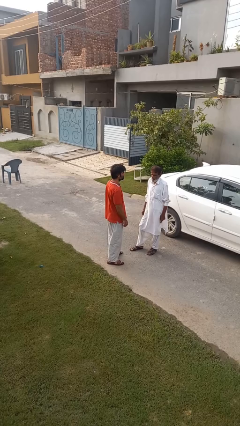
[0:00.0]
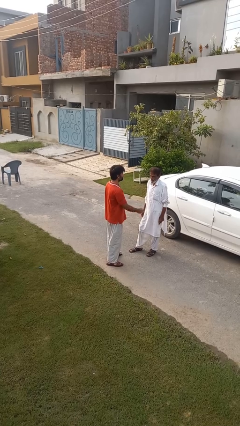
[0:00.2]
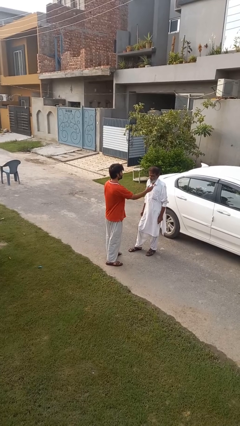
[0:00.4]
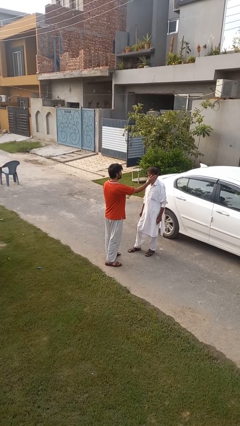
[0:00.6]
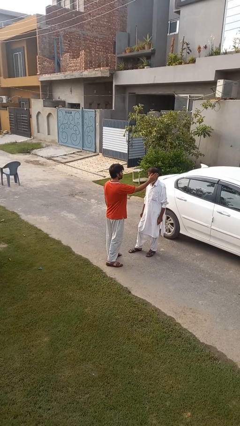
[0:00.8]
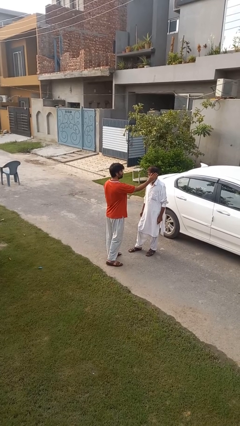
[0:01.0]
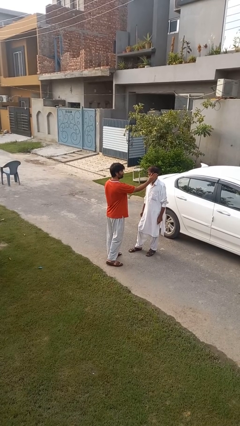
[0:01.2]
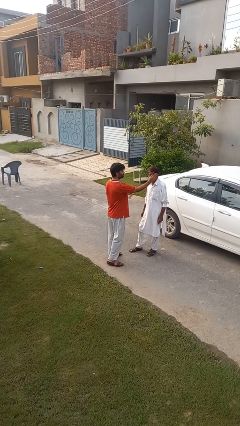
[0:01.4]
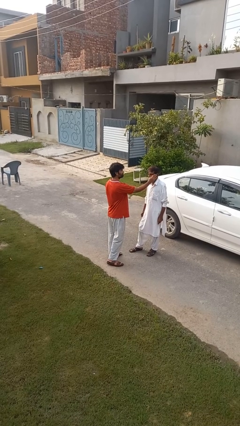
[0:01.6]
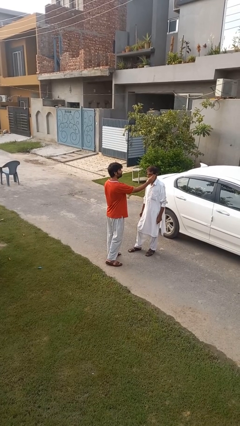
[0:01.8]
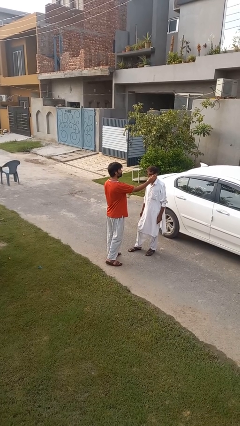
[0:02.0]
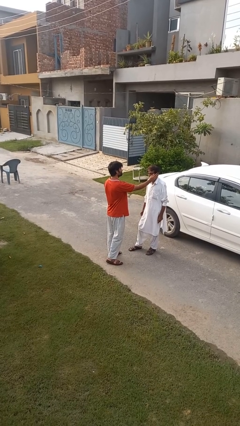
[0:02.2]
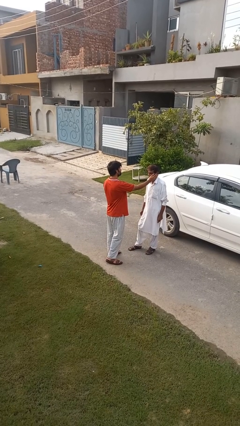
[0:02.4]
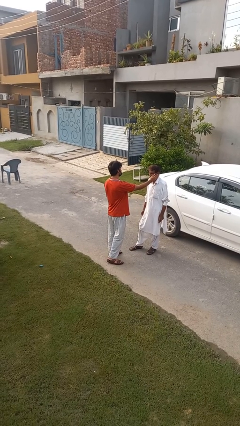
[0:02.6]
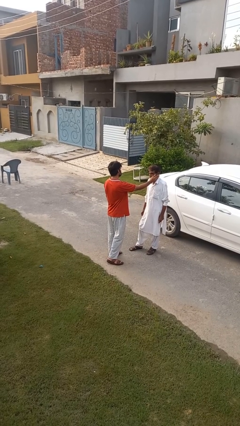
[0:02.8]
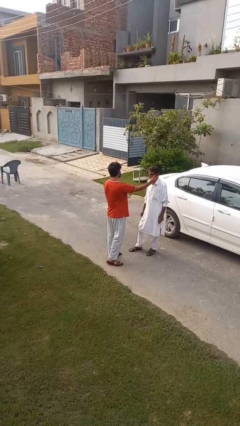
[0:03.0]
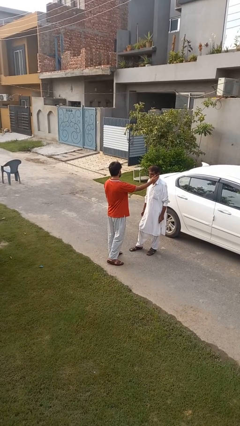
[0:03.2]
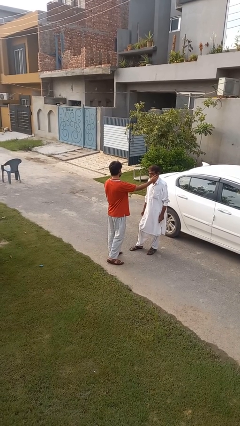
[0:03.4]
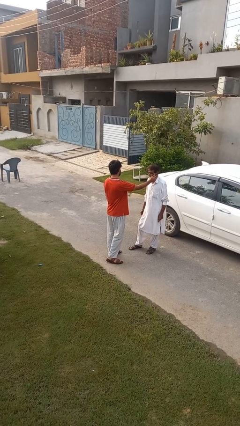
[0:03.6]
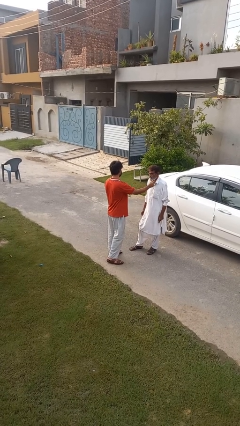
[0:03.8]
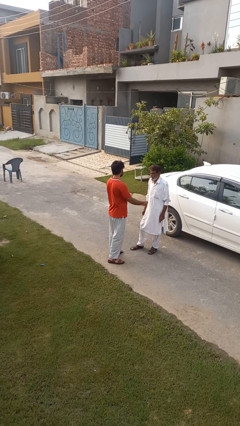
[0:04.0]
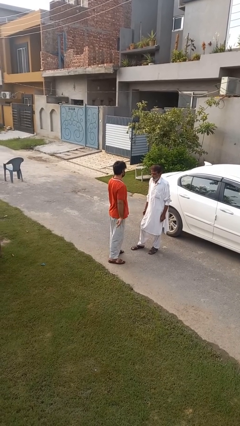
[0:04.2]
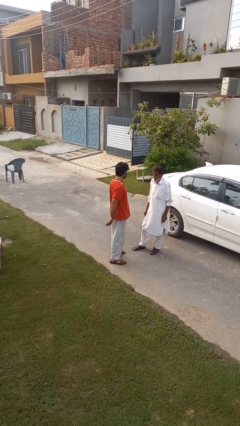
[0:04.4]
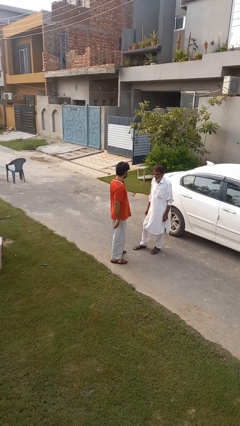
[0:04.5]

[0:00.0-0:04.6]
person touches face of person

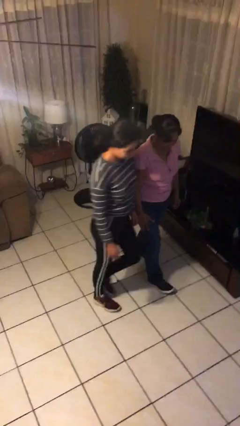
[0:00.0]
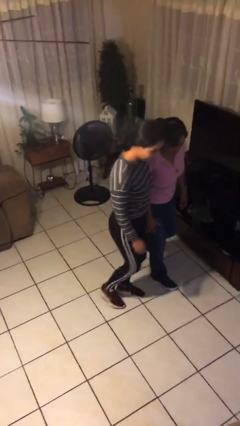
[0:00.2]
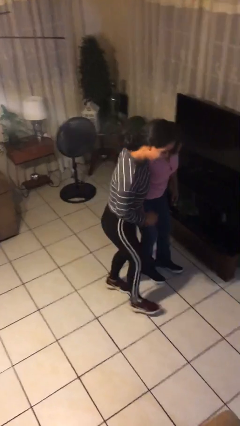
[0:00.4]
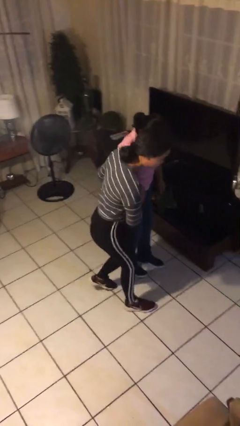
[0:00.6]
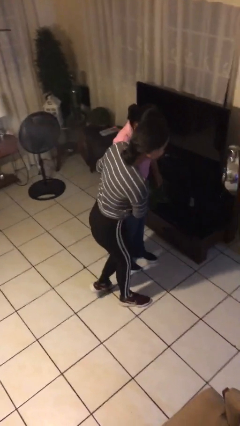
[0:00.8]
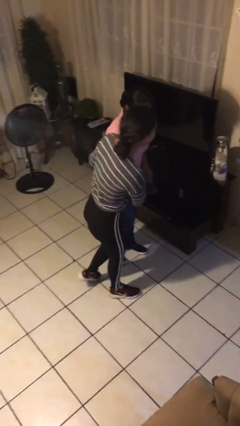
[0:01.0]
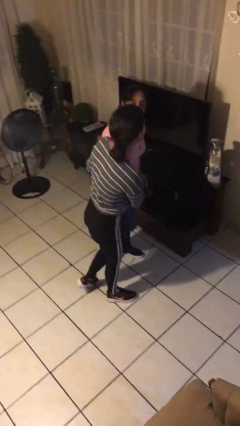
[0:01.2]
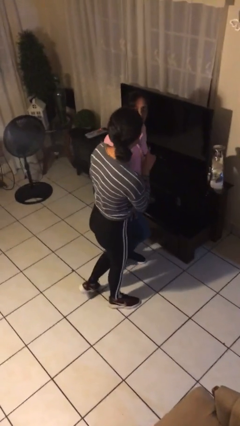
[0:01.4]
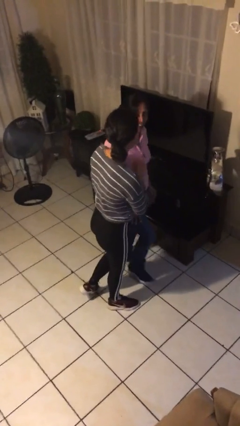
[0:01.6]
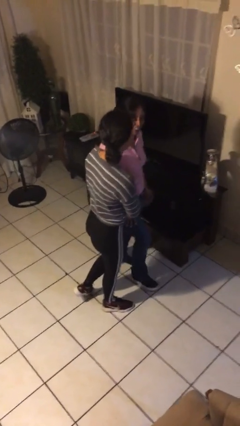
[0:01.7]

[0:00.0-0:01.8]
person bumps into person

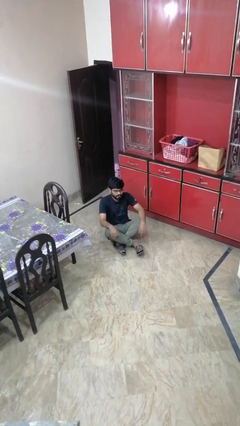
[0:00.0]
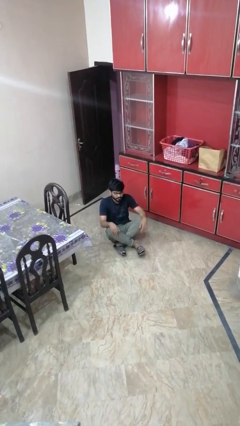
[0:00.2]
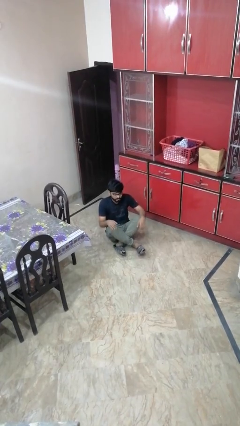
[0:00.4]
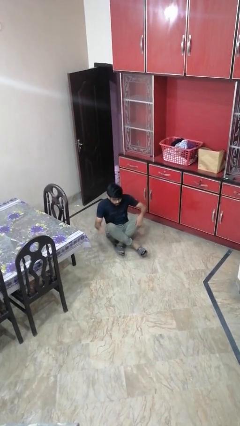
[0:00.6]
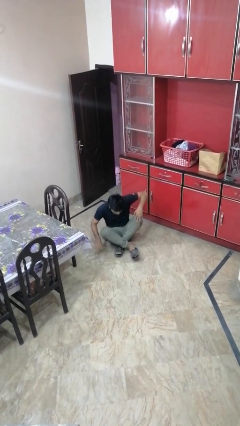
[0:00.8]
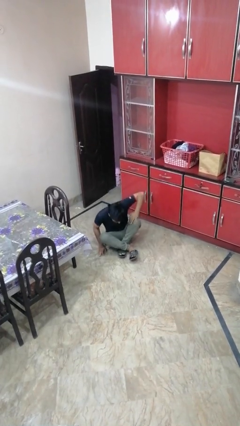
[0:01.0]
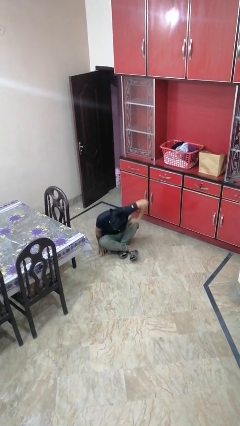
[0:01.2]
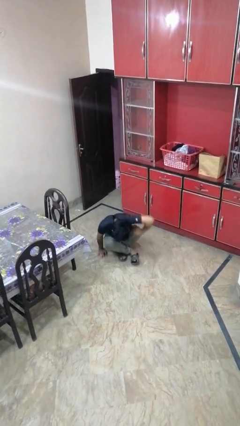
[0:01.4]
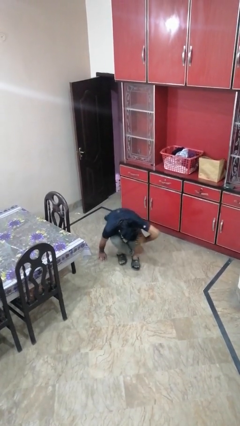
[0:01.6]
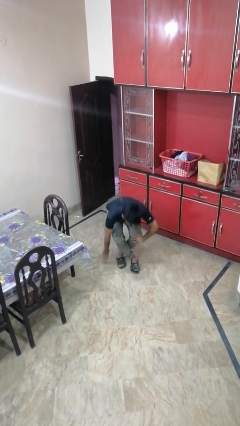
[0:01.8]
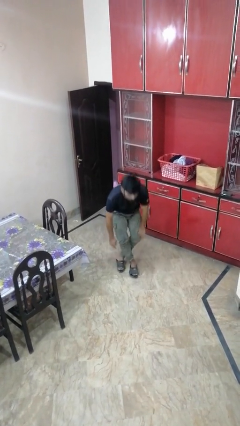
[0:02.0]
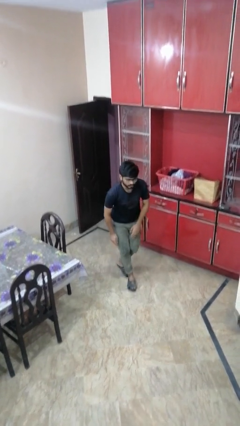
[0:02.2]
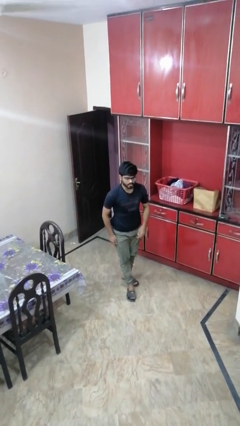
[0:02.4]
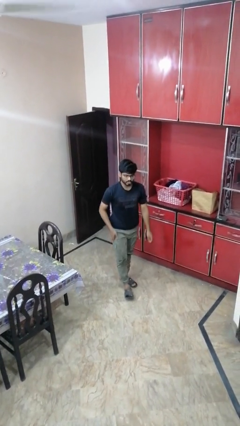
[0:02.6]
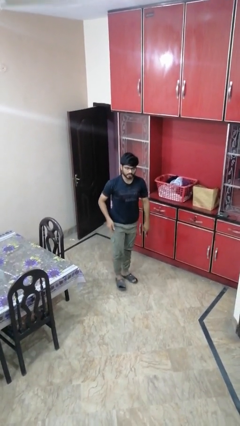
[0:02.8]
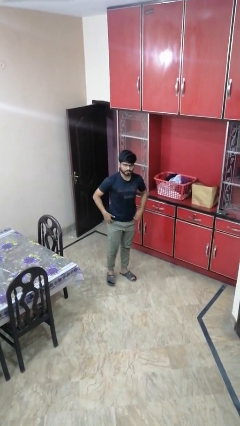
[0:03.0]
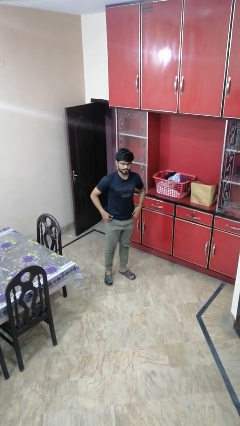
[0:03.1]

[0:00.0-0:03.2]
person stands up from floor

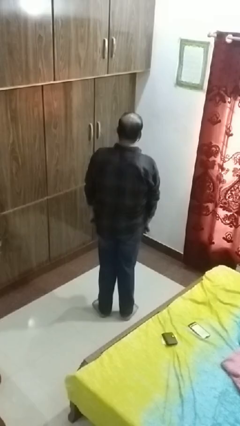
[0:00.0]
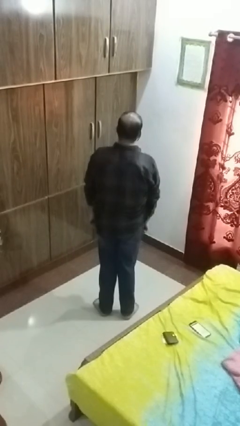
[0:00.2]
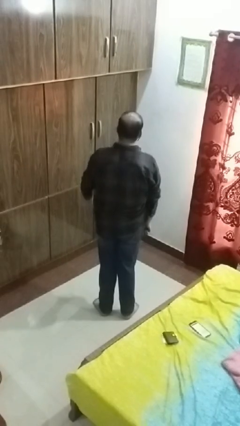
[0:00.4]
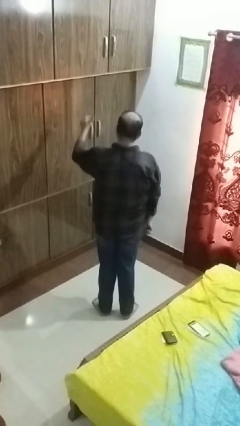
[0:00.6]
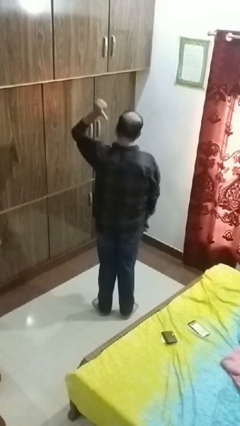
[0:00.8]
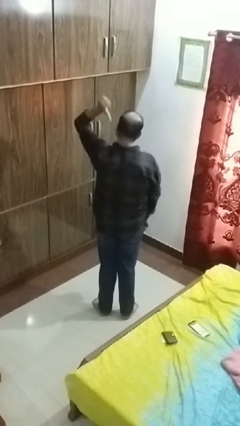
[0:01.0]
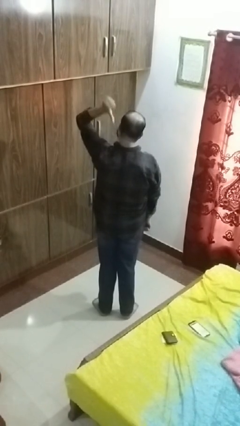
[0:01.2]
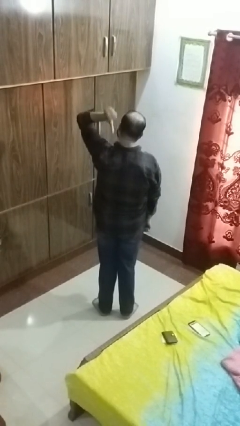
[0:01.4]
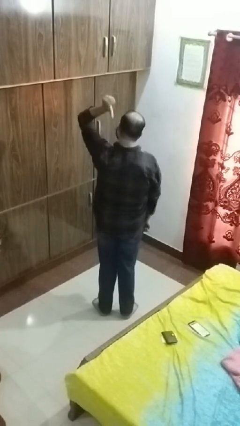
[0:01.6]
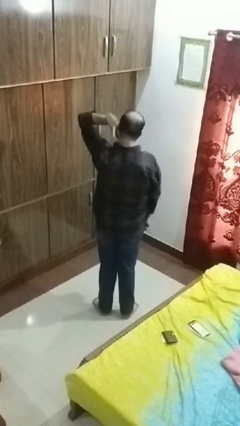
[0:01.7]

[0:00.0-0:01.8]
person gestures behind me

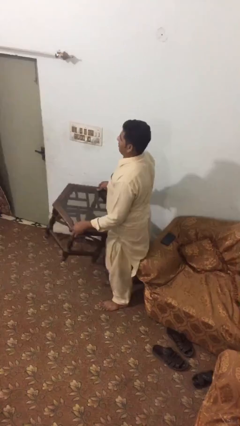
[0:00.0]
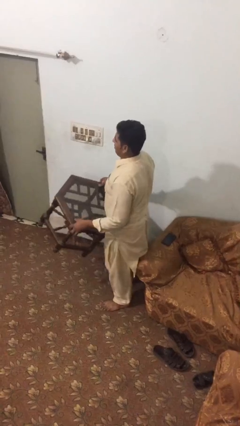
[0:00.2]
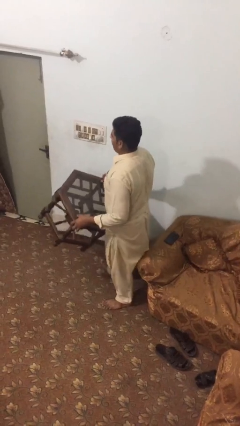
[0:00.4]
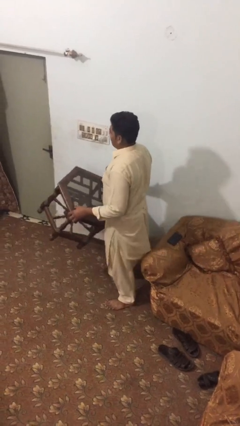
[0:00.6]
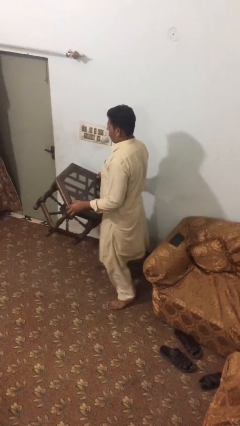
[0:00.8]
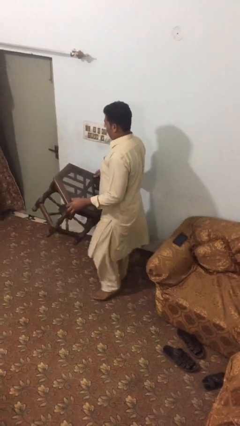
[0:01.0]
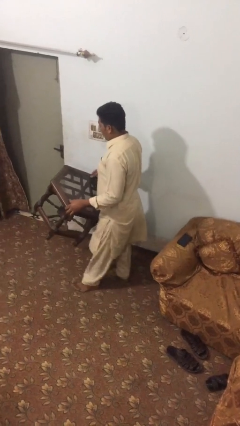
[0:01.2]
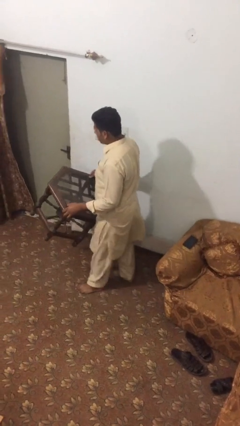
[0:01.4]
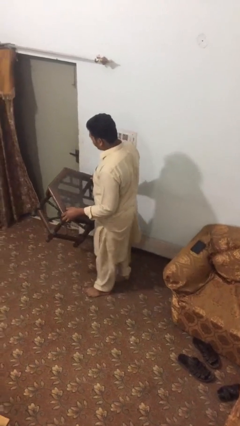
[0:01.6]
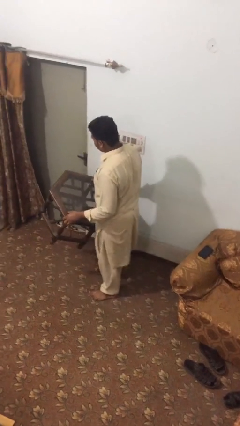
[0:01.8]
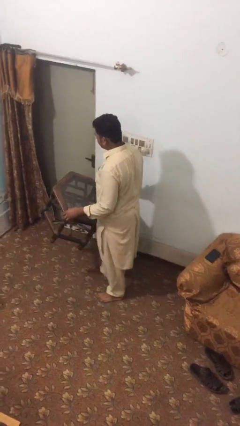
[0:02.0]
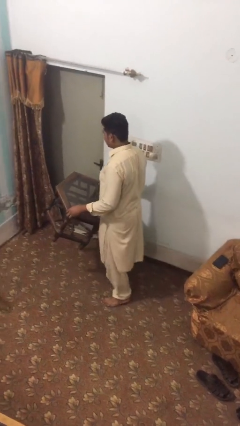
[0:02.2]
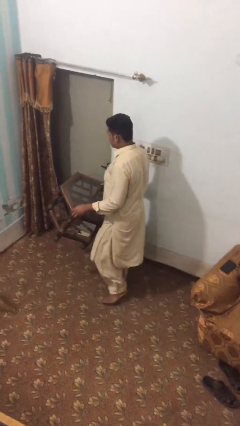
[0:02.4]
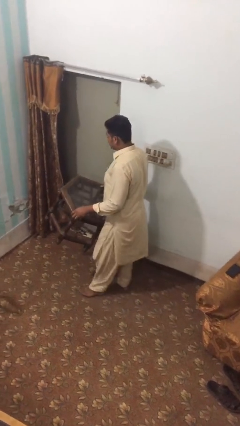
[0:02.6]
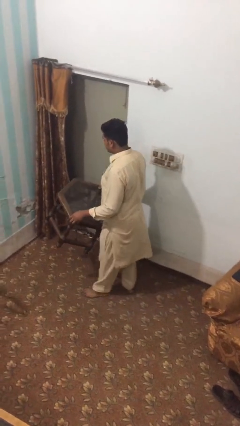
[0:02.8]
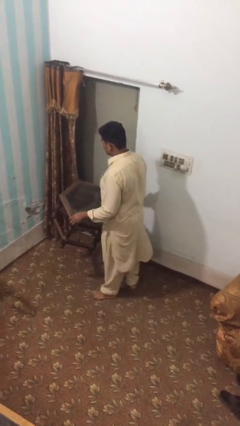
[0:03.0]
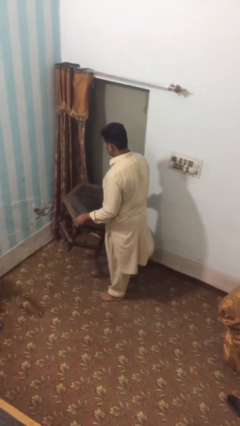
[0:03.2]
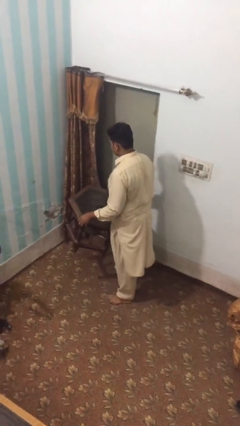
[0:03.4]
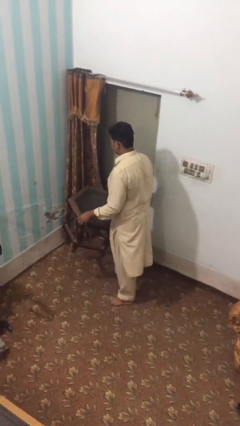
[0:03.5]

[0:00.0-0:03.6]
person carries heavy object

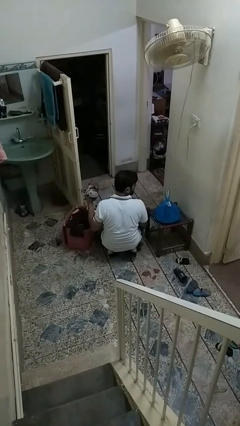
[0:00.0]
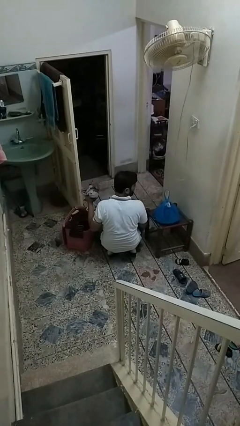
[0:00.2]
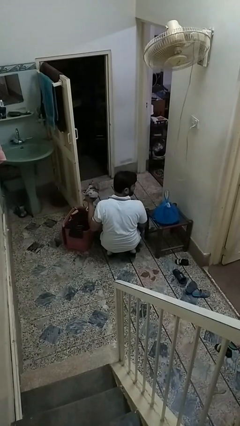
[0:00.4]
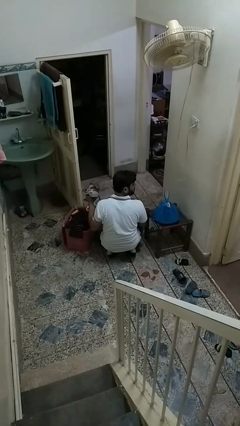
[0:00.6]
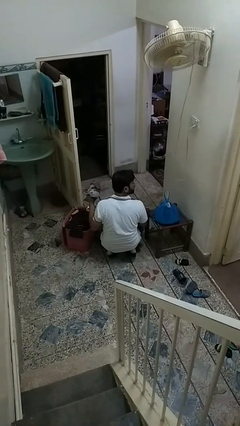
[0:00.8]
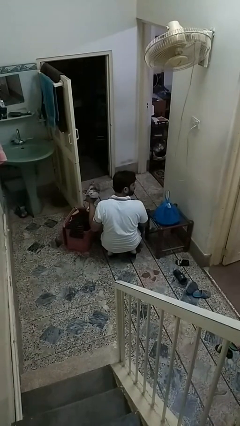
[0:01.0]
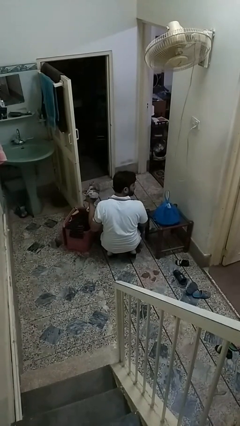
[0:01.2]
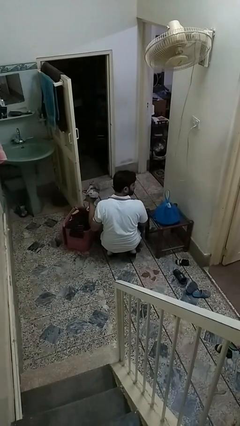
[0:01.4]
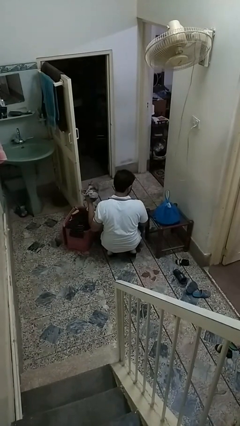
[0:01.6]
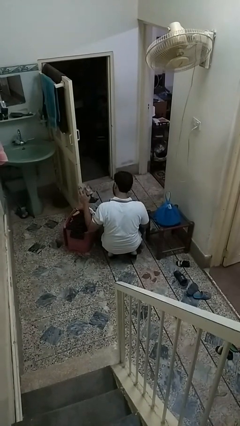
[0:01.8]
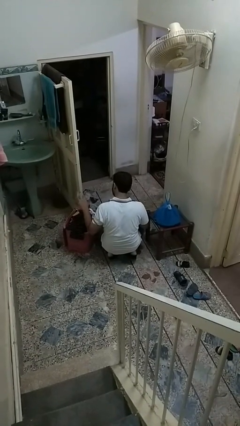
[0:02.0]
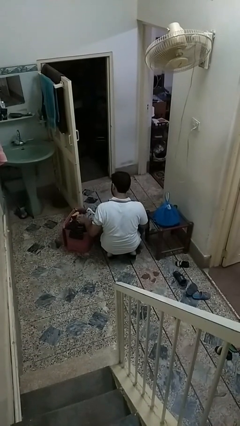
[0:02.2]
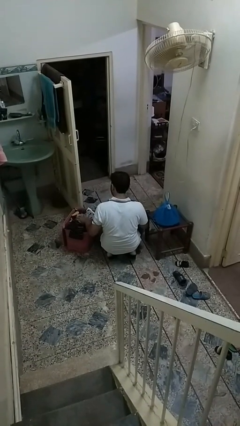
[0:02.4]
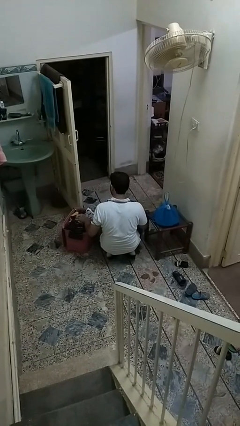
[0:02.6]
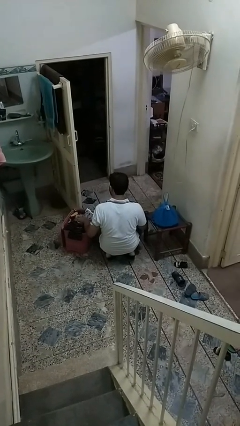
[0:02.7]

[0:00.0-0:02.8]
person puts object into basket
